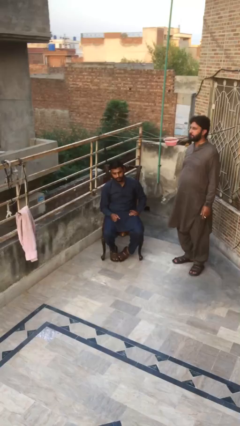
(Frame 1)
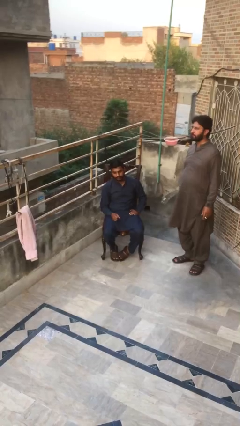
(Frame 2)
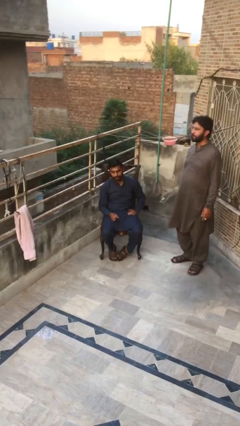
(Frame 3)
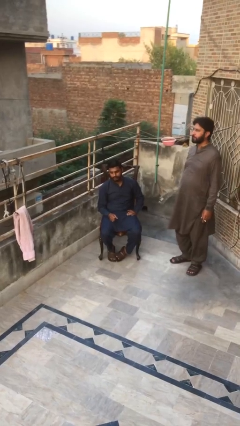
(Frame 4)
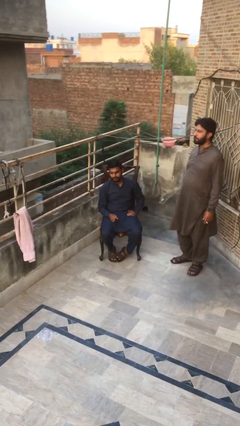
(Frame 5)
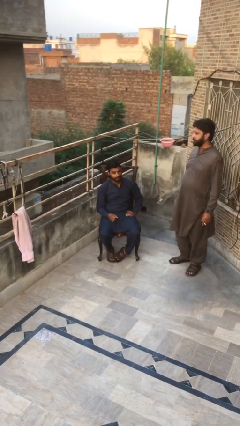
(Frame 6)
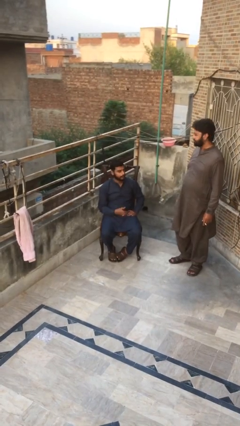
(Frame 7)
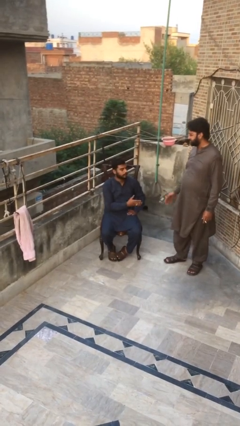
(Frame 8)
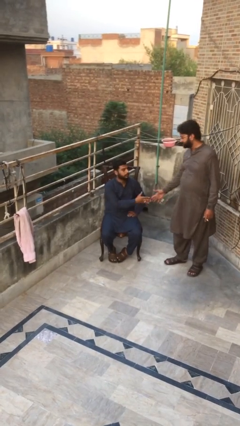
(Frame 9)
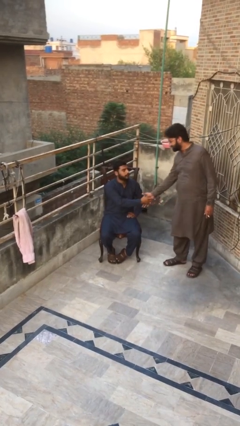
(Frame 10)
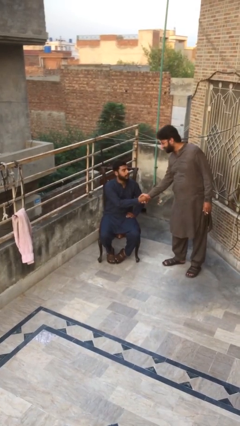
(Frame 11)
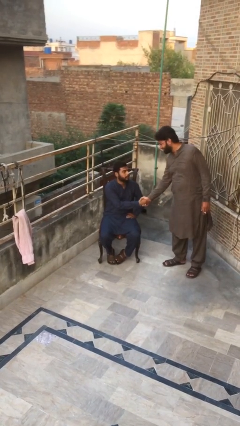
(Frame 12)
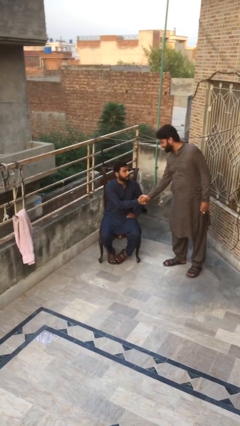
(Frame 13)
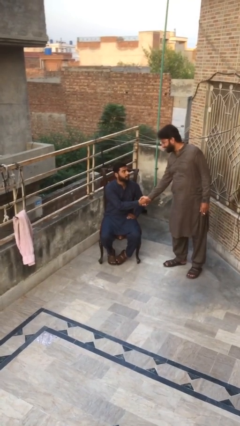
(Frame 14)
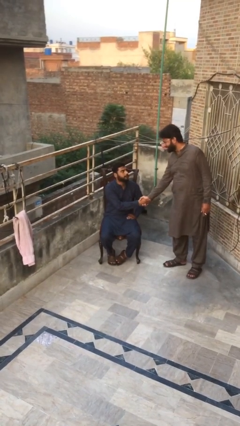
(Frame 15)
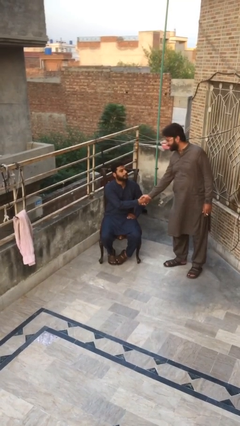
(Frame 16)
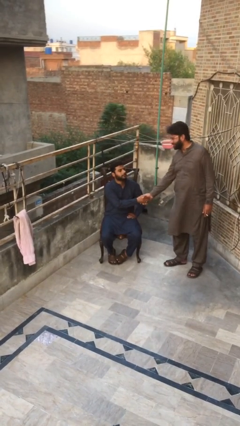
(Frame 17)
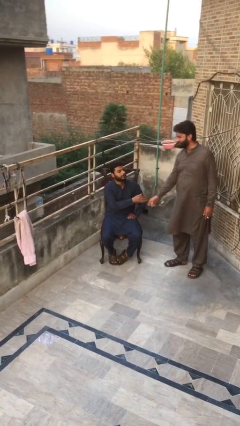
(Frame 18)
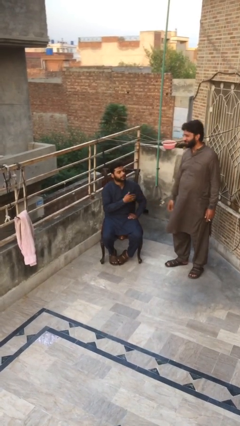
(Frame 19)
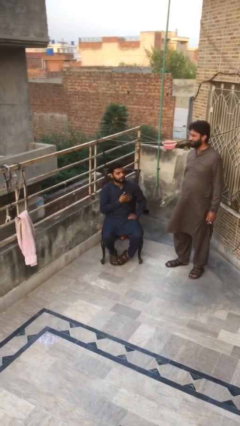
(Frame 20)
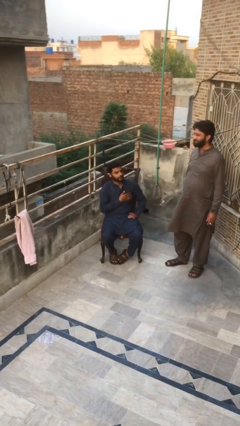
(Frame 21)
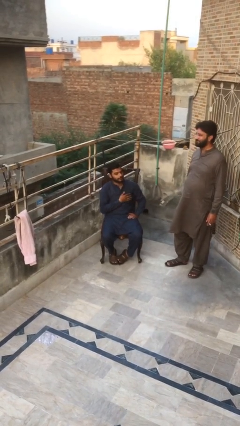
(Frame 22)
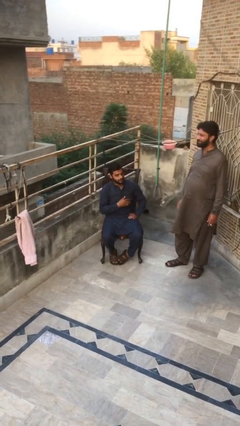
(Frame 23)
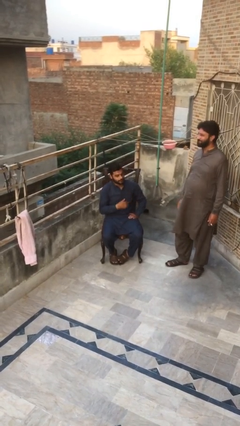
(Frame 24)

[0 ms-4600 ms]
person shakes hand

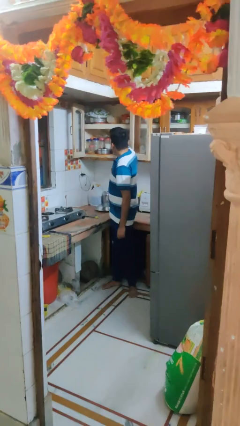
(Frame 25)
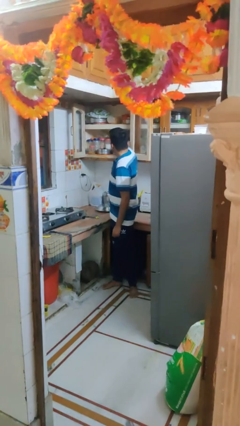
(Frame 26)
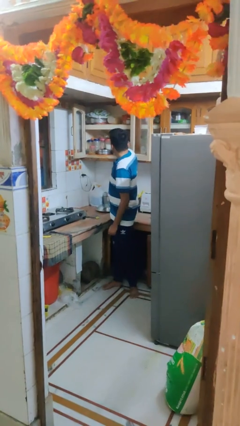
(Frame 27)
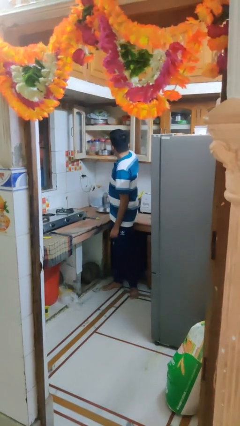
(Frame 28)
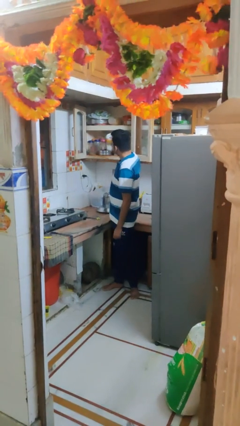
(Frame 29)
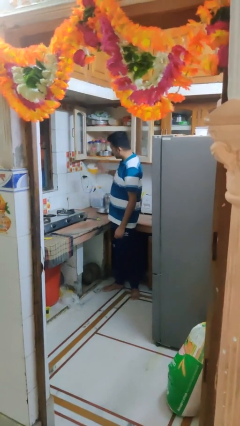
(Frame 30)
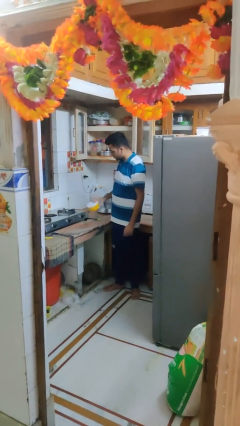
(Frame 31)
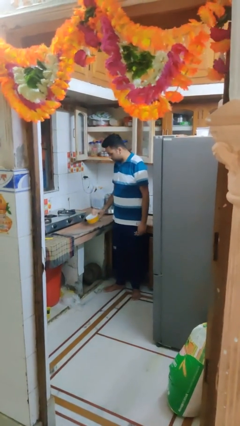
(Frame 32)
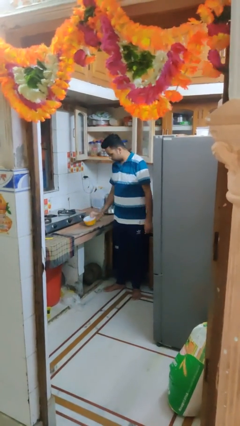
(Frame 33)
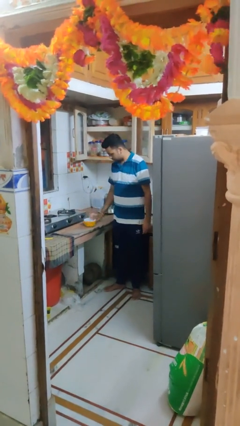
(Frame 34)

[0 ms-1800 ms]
person takes object from cabinet

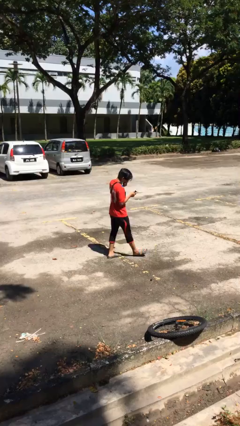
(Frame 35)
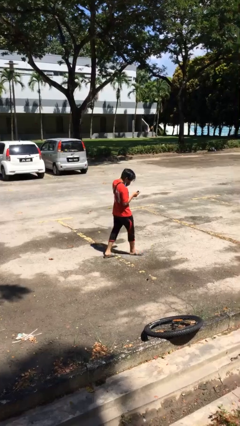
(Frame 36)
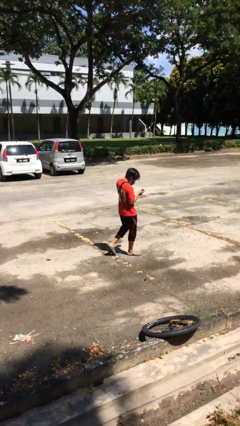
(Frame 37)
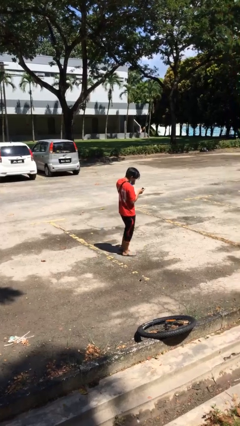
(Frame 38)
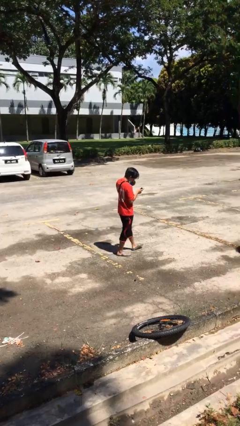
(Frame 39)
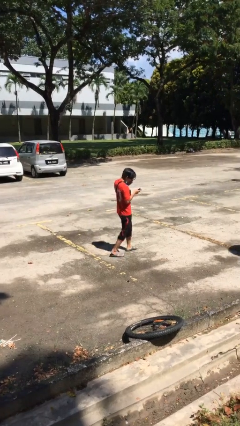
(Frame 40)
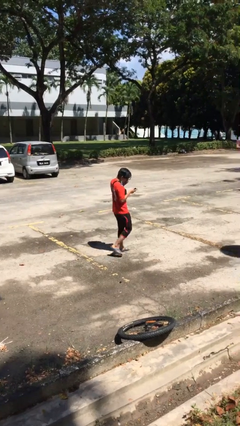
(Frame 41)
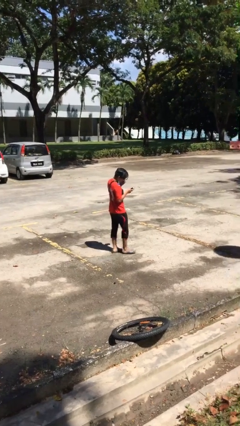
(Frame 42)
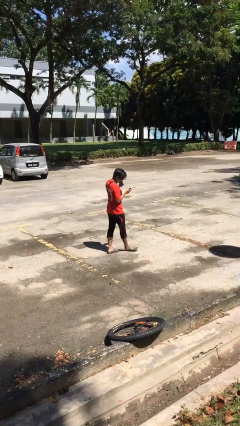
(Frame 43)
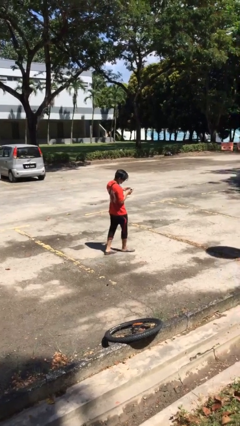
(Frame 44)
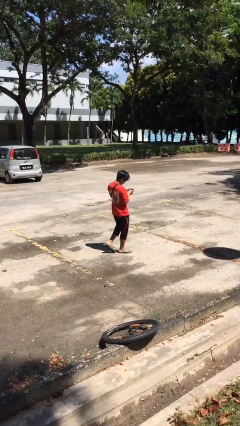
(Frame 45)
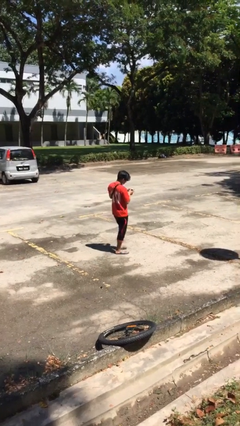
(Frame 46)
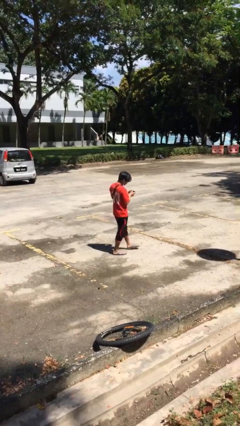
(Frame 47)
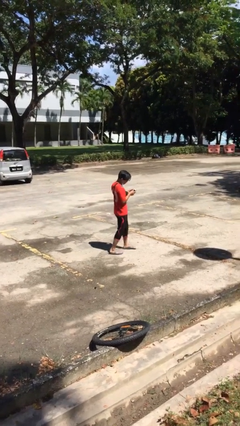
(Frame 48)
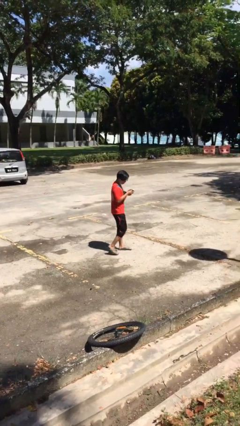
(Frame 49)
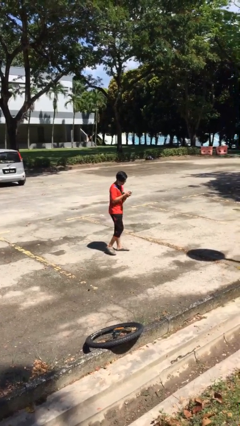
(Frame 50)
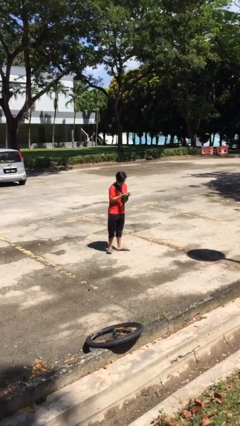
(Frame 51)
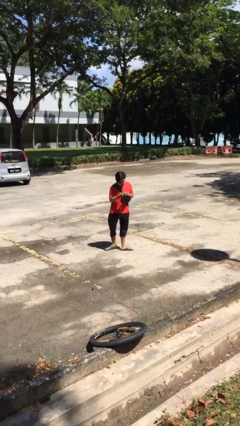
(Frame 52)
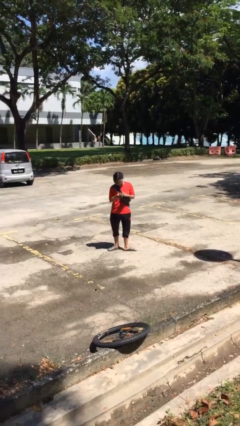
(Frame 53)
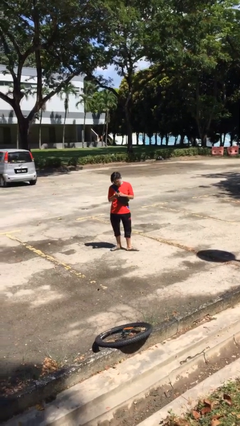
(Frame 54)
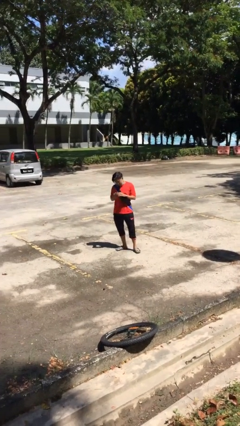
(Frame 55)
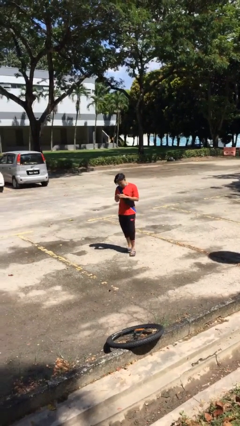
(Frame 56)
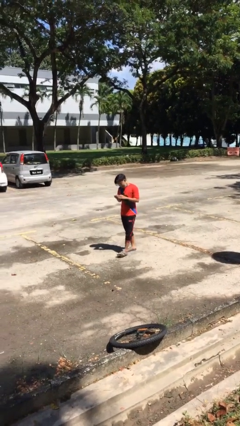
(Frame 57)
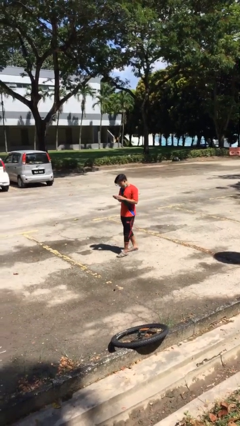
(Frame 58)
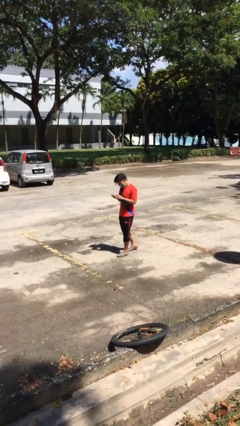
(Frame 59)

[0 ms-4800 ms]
person texts on phone

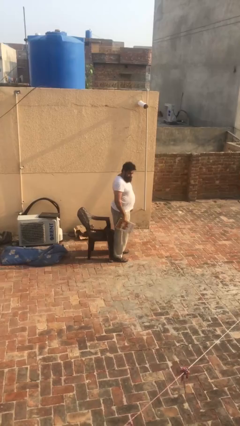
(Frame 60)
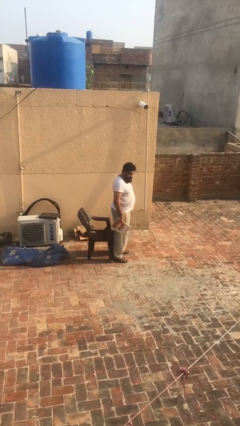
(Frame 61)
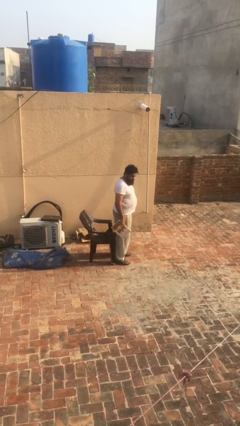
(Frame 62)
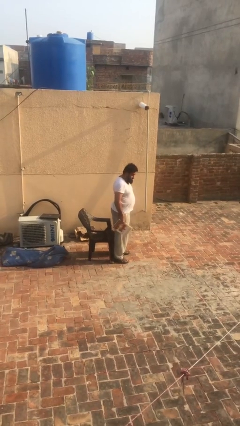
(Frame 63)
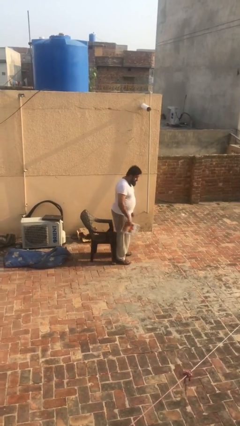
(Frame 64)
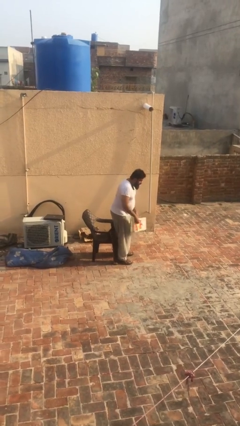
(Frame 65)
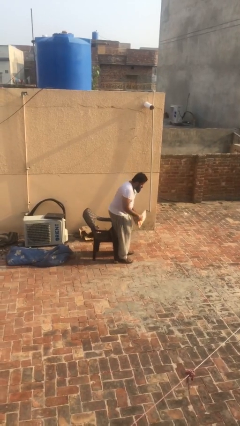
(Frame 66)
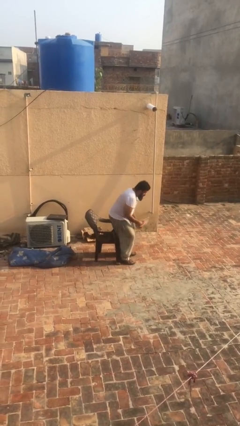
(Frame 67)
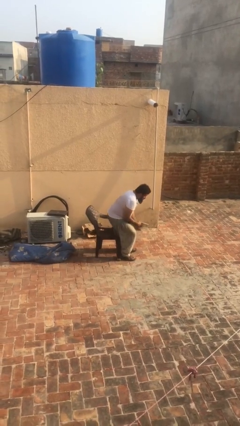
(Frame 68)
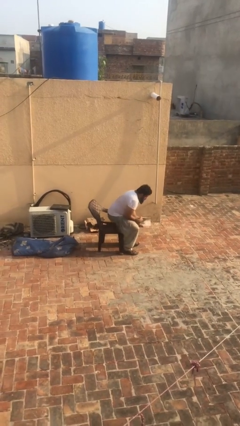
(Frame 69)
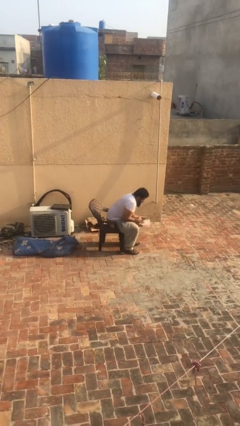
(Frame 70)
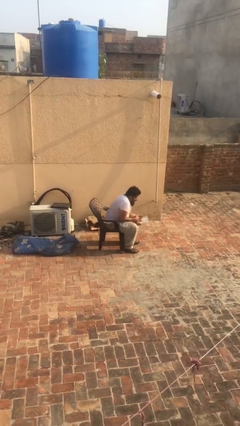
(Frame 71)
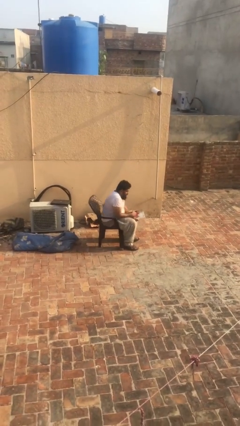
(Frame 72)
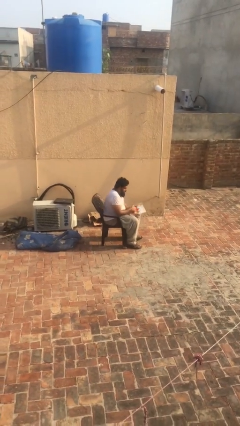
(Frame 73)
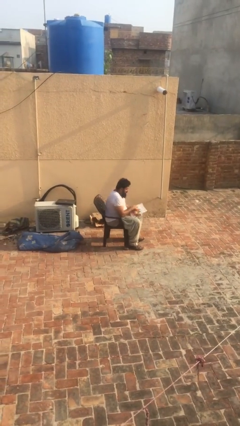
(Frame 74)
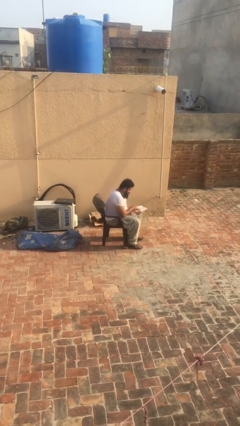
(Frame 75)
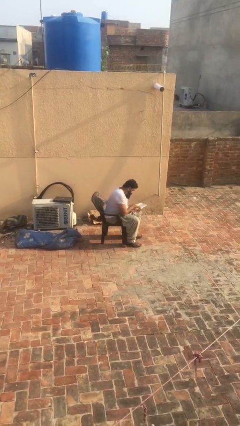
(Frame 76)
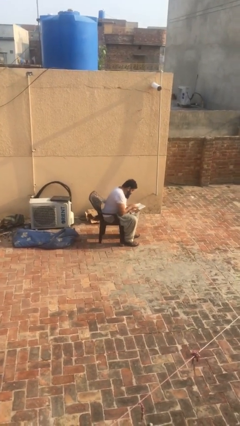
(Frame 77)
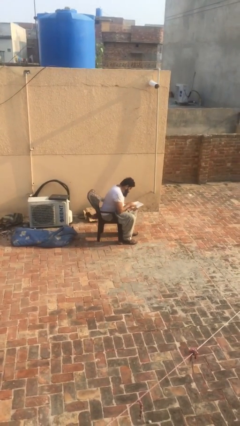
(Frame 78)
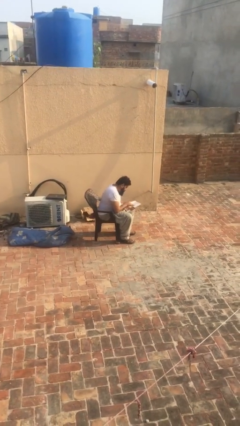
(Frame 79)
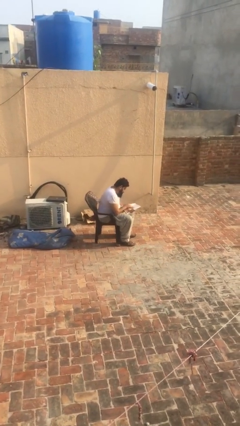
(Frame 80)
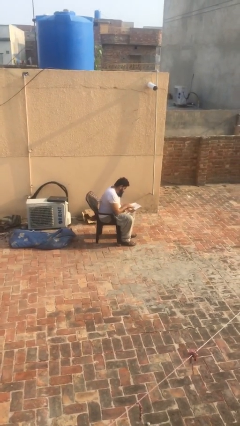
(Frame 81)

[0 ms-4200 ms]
person sits down

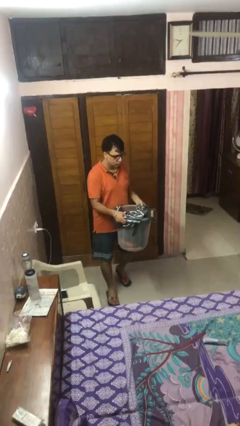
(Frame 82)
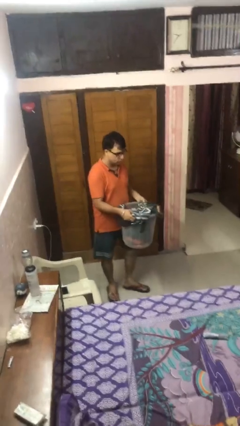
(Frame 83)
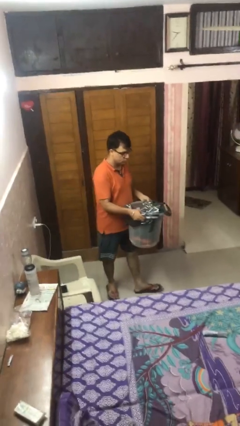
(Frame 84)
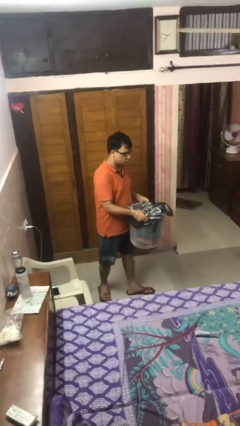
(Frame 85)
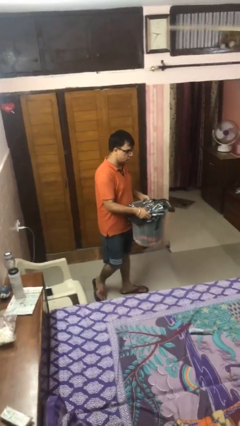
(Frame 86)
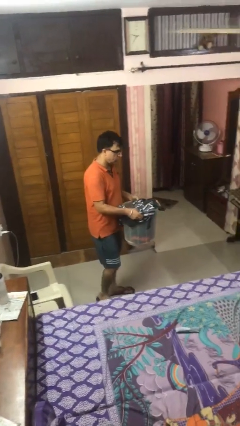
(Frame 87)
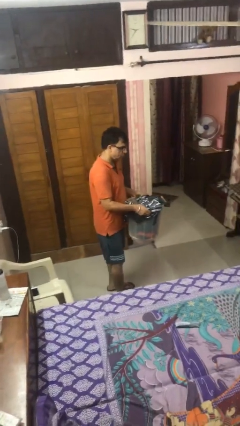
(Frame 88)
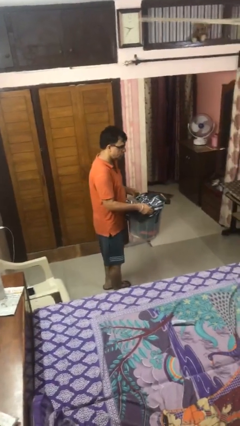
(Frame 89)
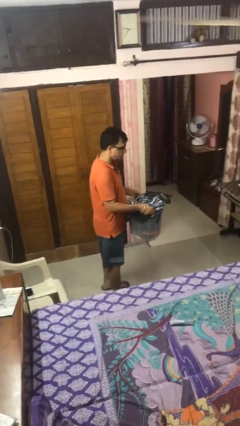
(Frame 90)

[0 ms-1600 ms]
person carries laundry basket

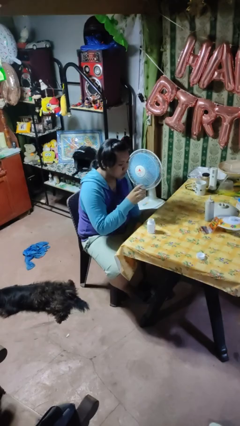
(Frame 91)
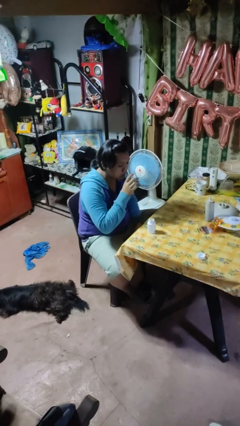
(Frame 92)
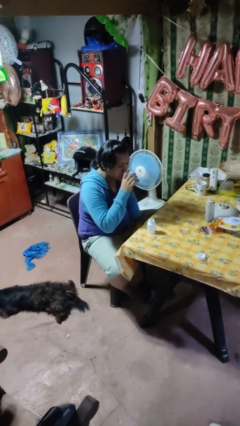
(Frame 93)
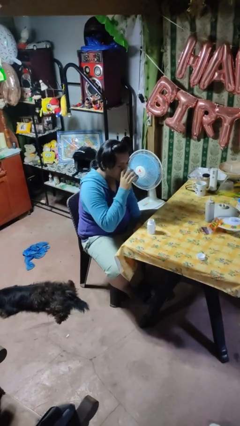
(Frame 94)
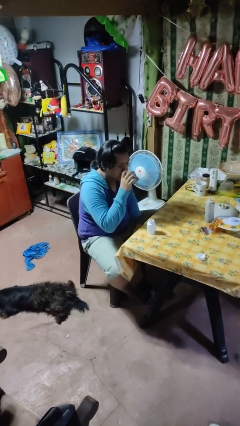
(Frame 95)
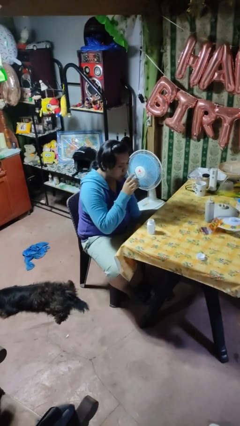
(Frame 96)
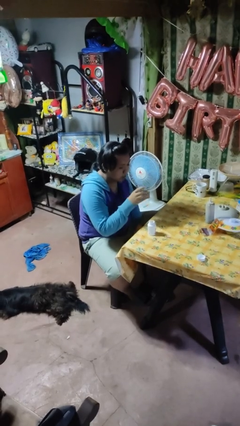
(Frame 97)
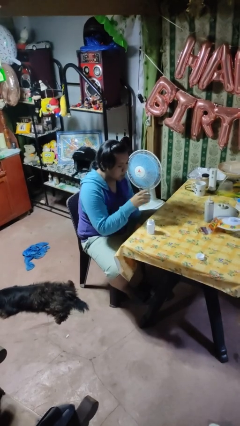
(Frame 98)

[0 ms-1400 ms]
person drinks from cup
